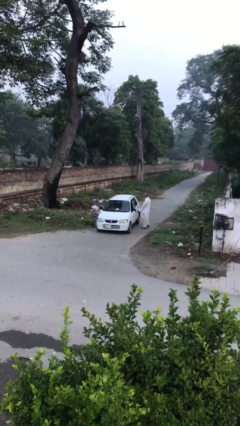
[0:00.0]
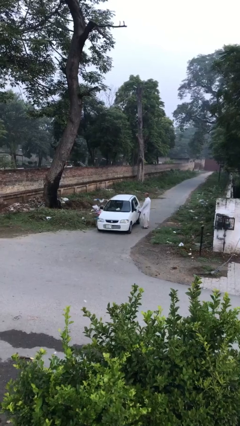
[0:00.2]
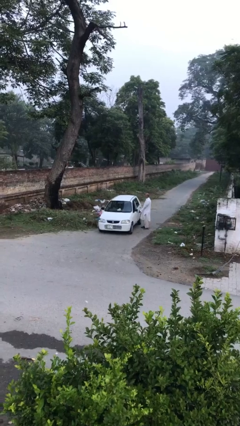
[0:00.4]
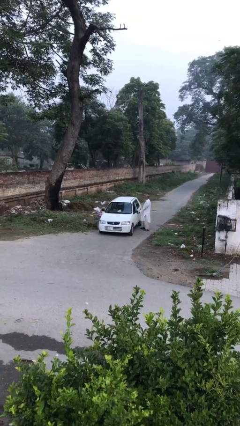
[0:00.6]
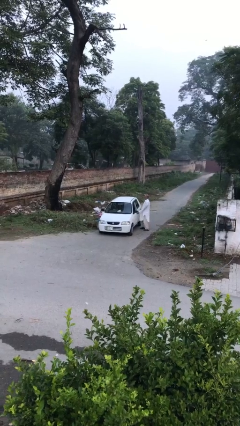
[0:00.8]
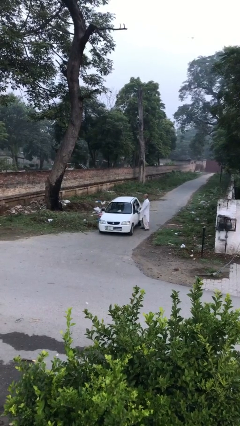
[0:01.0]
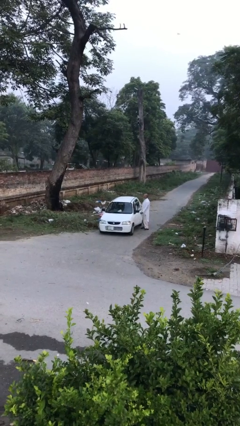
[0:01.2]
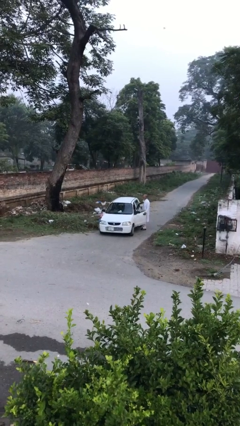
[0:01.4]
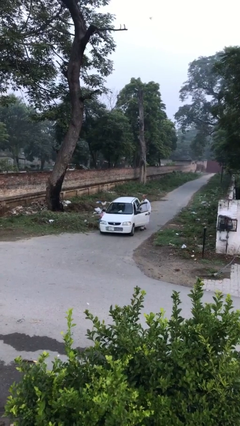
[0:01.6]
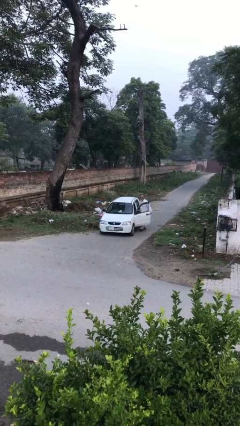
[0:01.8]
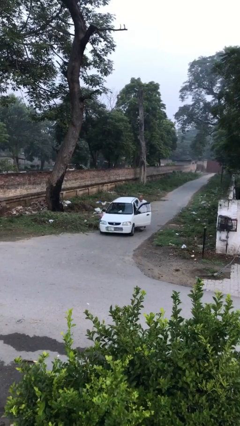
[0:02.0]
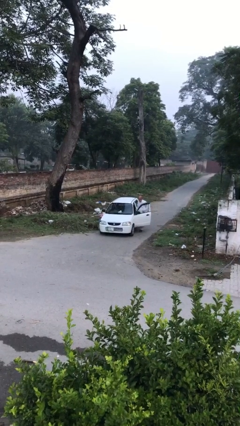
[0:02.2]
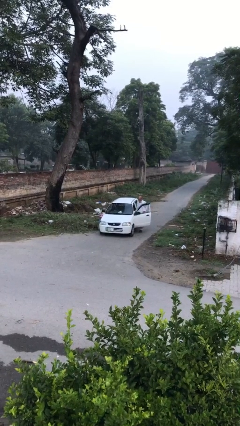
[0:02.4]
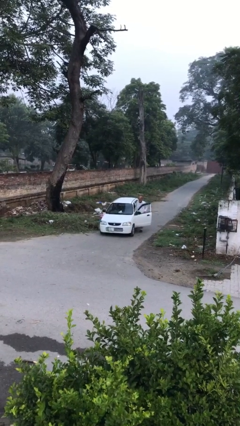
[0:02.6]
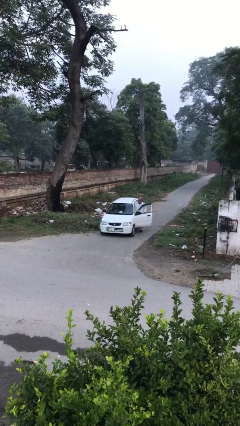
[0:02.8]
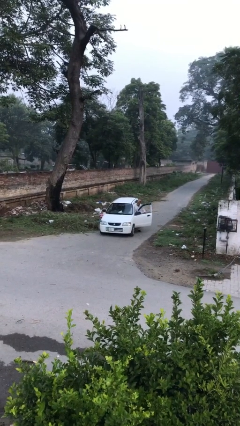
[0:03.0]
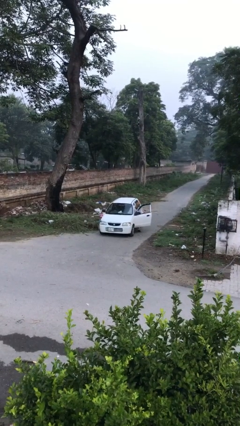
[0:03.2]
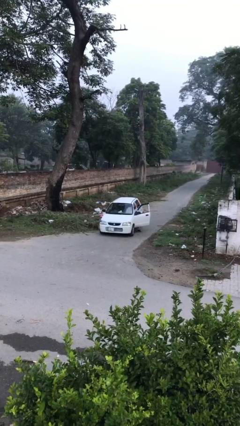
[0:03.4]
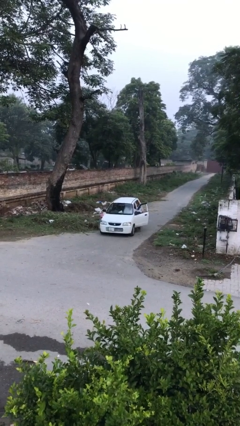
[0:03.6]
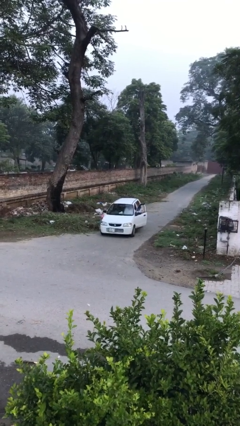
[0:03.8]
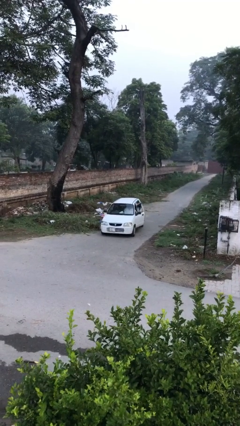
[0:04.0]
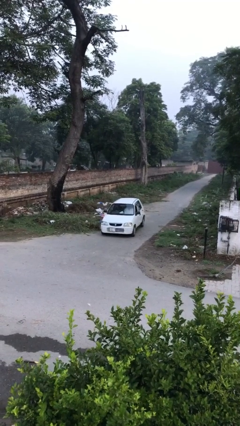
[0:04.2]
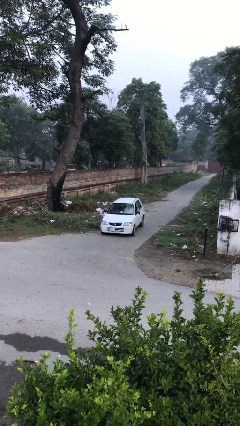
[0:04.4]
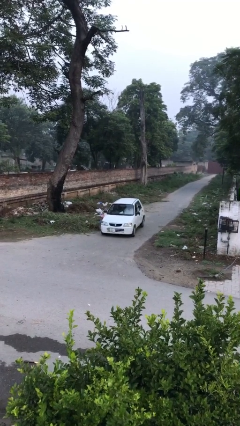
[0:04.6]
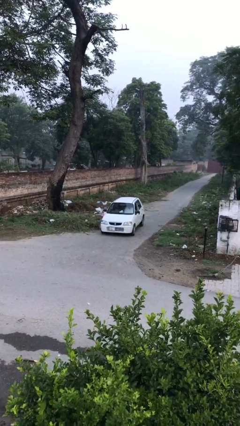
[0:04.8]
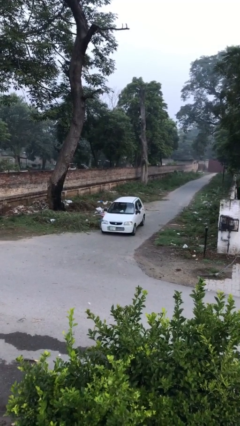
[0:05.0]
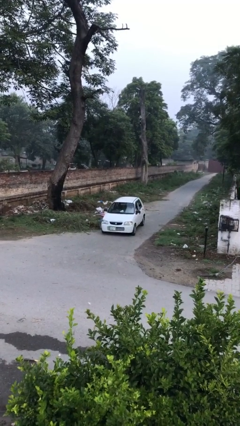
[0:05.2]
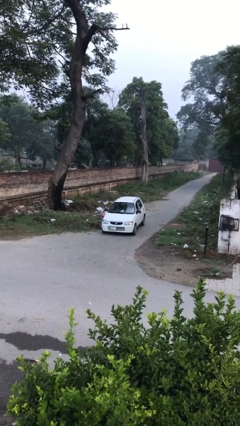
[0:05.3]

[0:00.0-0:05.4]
car picks up person

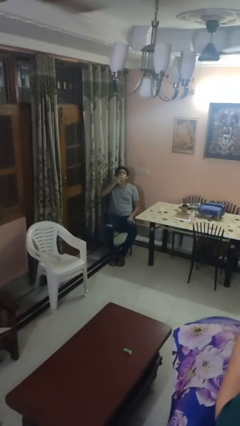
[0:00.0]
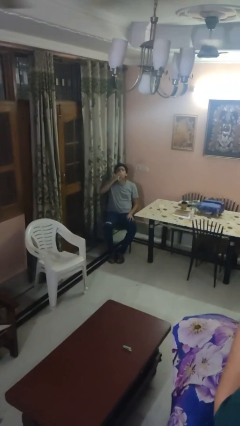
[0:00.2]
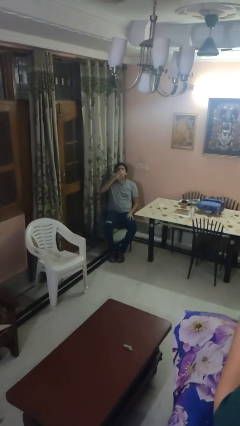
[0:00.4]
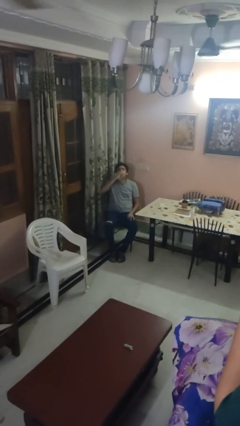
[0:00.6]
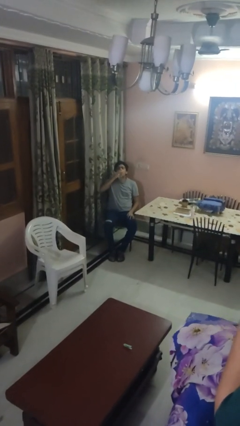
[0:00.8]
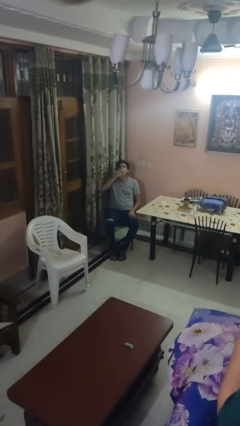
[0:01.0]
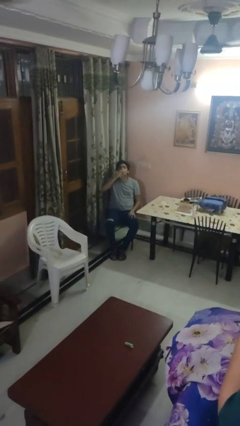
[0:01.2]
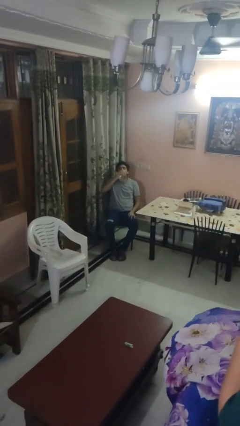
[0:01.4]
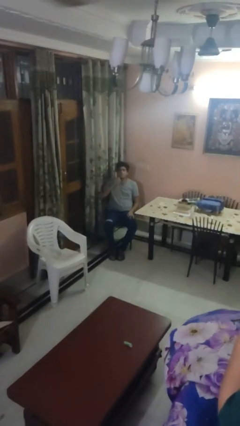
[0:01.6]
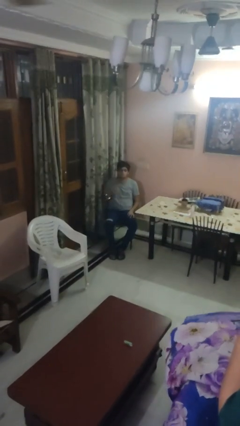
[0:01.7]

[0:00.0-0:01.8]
person drinks from bottle

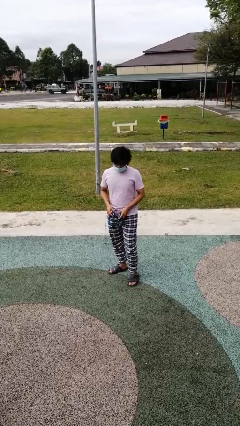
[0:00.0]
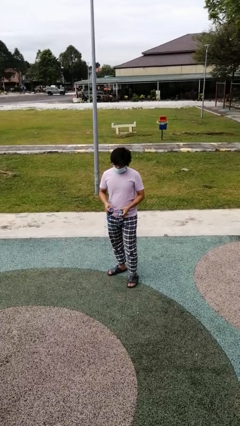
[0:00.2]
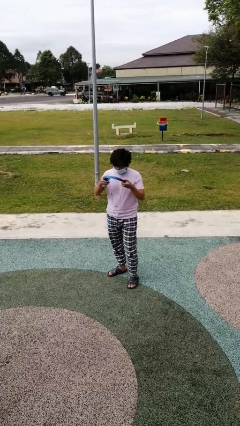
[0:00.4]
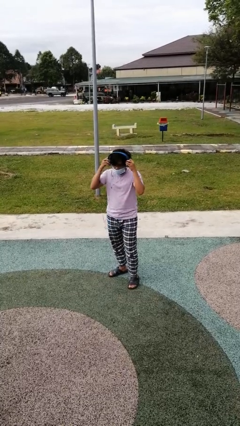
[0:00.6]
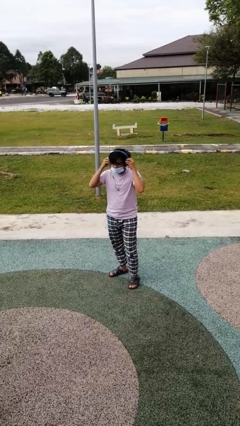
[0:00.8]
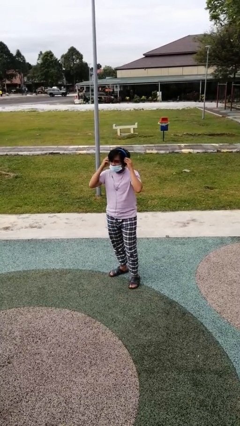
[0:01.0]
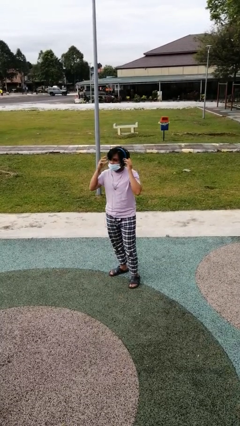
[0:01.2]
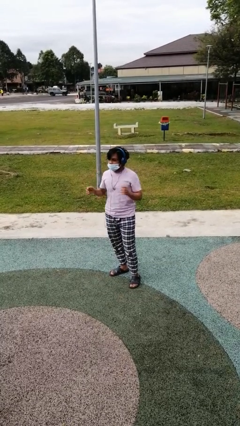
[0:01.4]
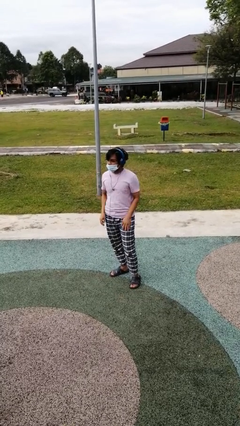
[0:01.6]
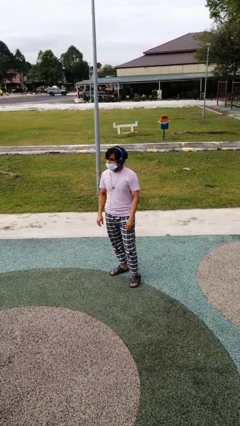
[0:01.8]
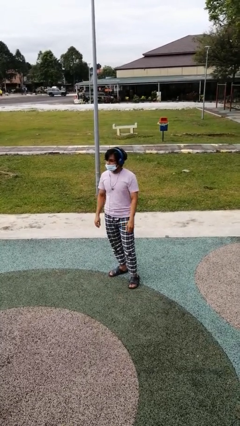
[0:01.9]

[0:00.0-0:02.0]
person puts on headphones

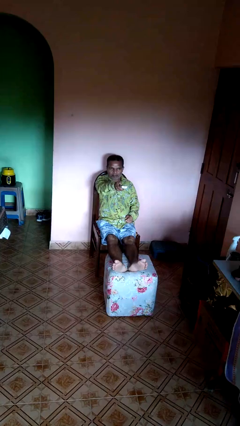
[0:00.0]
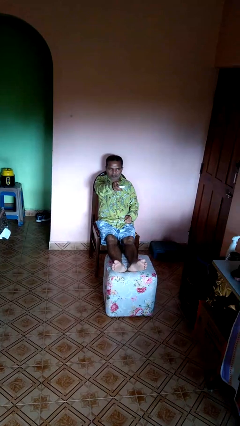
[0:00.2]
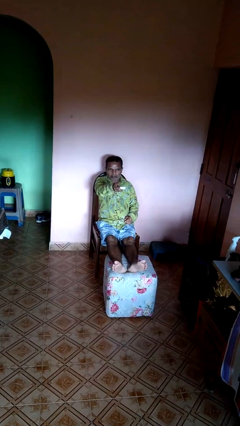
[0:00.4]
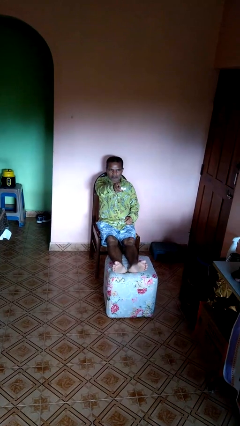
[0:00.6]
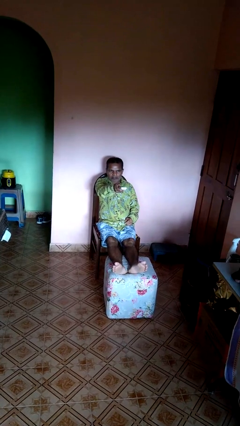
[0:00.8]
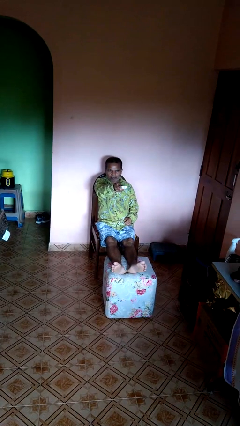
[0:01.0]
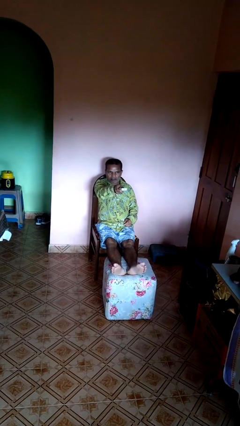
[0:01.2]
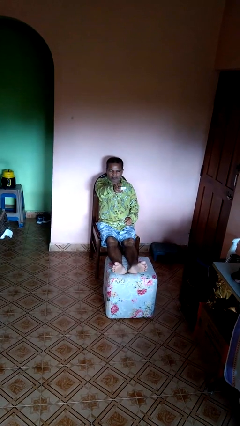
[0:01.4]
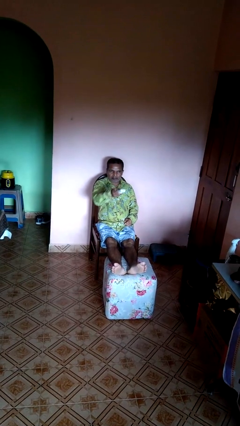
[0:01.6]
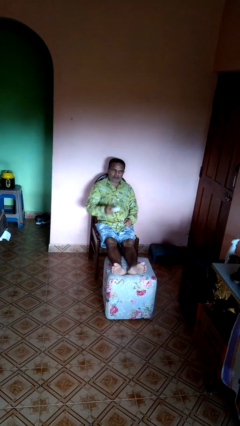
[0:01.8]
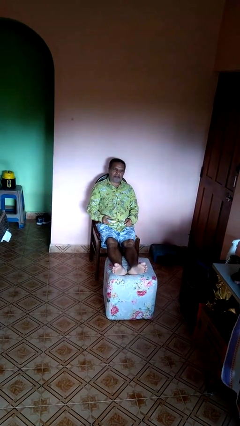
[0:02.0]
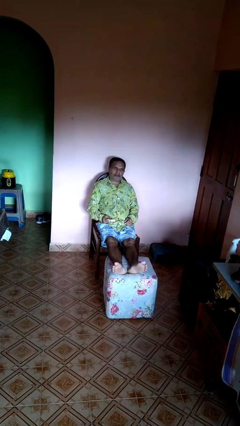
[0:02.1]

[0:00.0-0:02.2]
person uses television remote

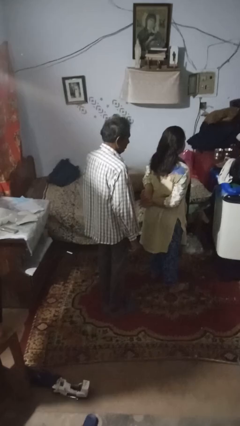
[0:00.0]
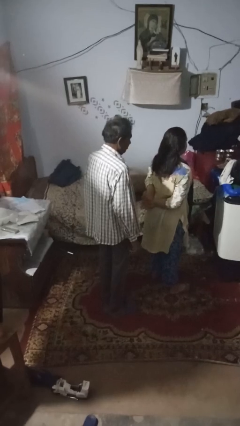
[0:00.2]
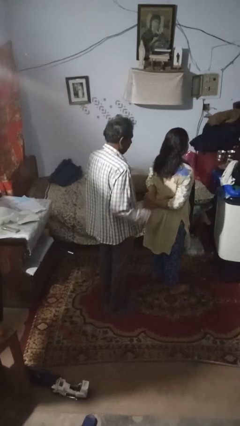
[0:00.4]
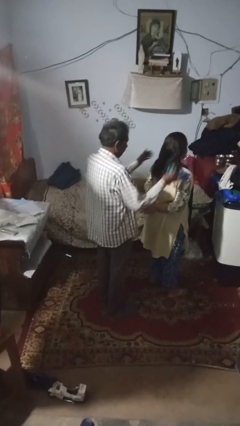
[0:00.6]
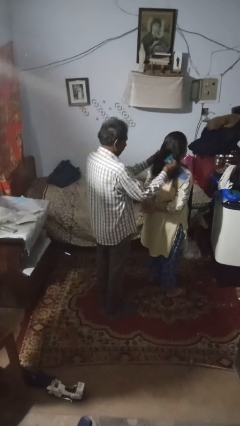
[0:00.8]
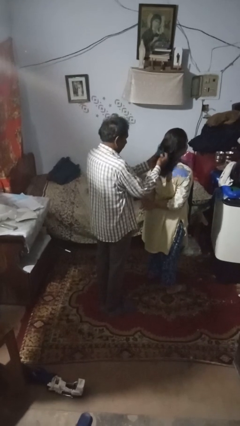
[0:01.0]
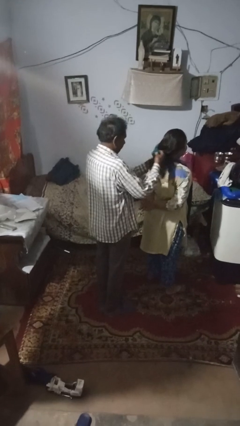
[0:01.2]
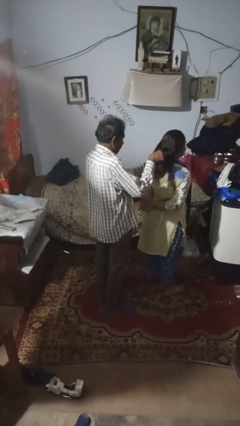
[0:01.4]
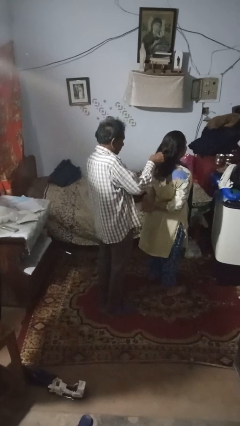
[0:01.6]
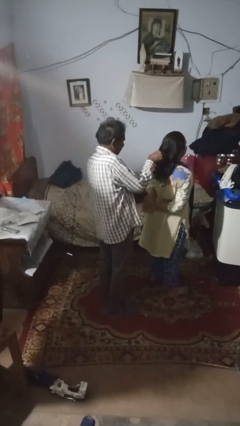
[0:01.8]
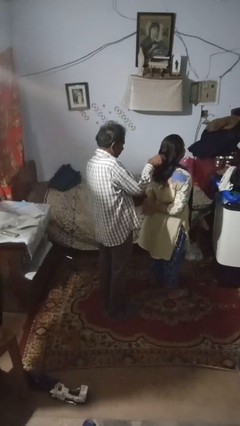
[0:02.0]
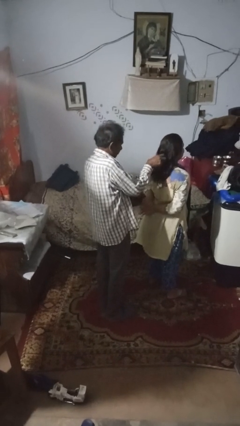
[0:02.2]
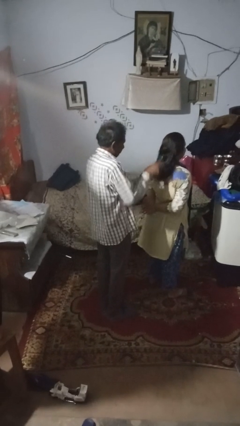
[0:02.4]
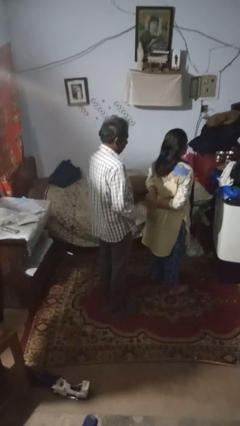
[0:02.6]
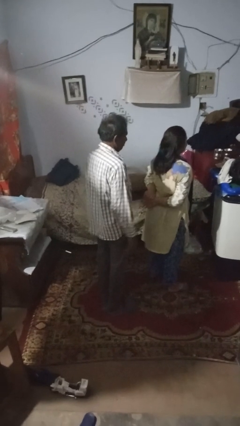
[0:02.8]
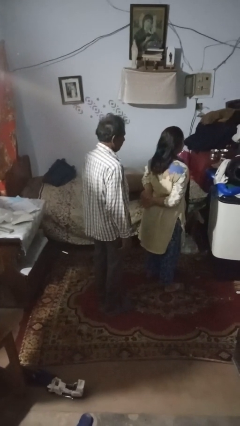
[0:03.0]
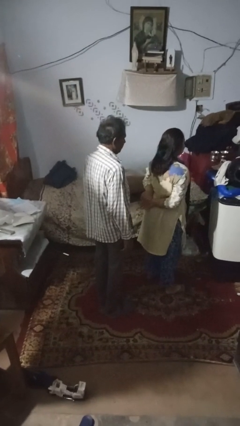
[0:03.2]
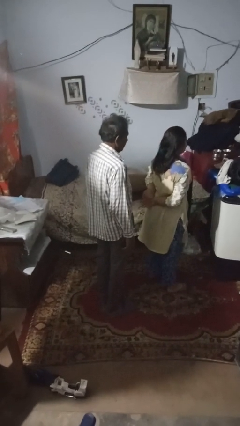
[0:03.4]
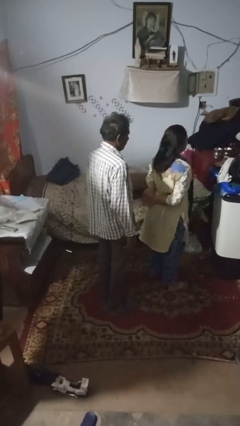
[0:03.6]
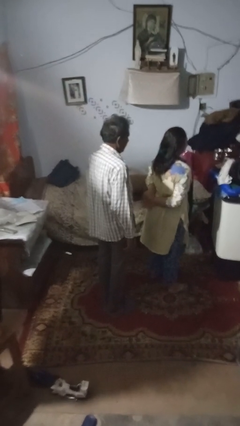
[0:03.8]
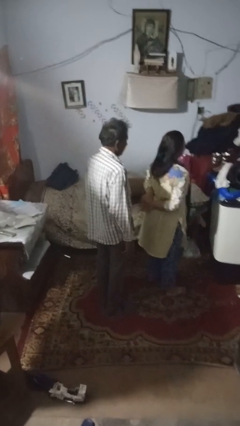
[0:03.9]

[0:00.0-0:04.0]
person braids hair of person

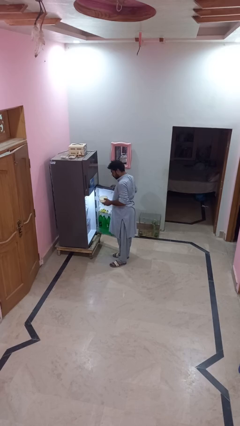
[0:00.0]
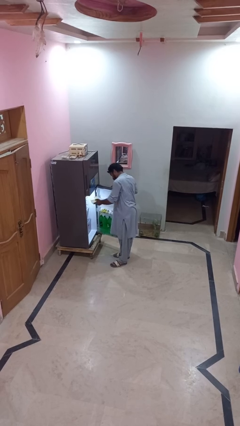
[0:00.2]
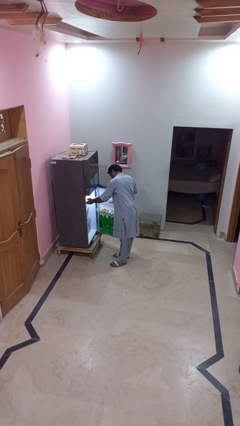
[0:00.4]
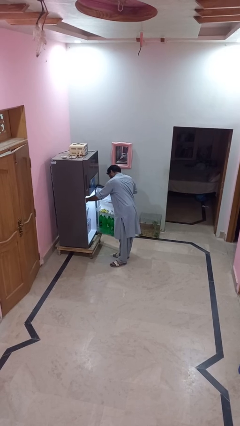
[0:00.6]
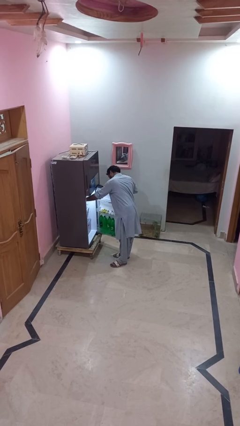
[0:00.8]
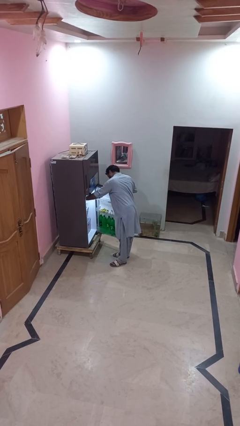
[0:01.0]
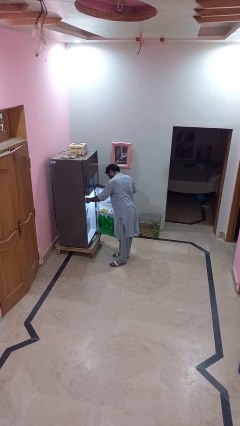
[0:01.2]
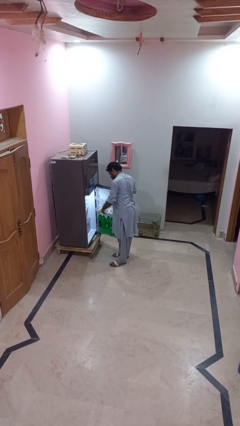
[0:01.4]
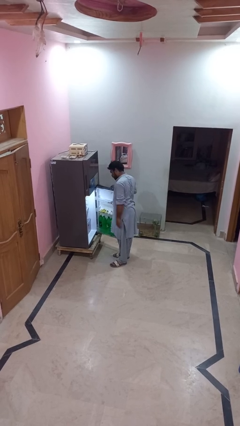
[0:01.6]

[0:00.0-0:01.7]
person puts object into refrigerator

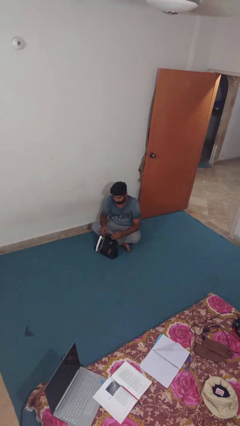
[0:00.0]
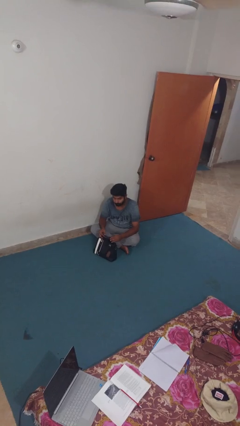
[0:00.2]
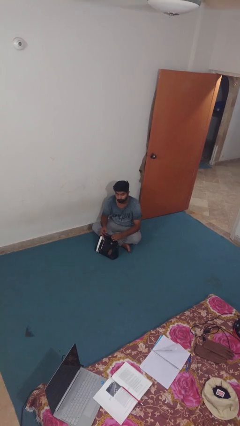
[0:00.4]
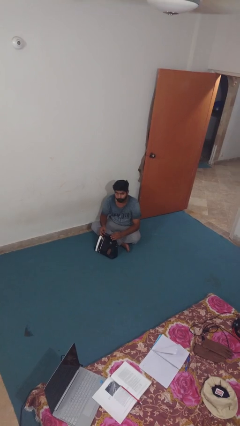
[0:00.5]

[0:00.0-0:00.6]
person takes object from purse
